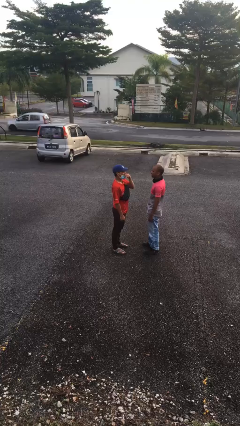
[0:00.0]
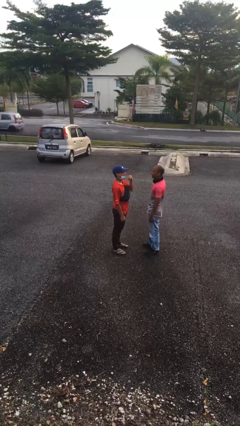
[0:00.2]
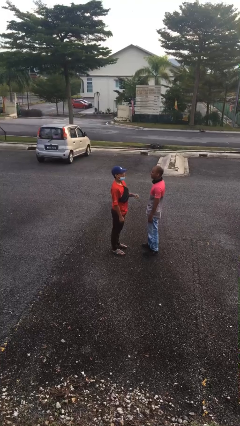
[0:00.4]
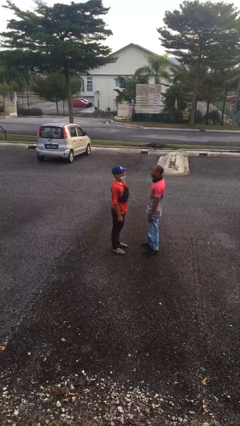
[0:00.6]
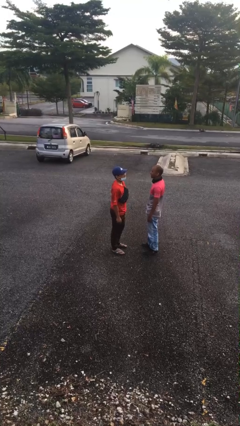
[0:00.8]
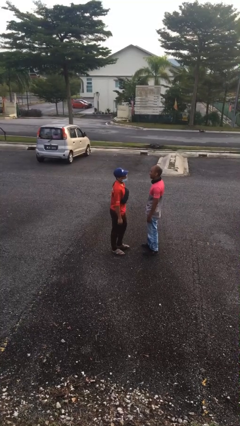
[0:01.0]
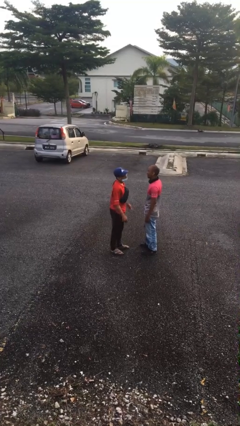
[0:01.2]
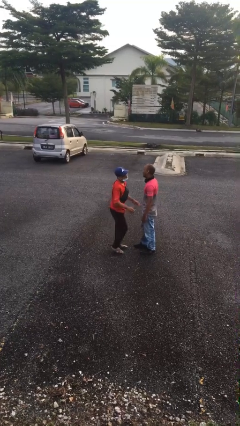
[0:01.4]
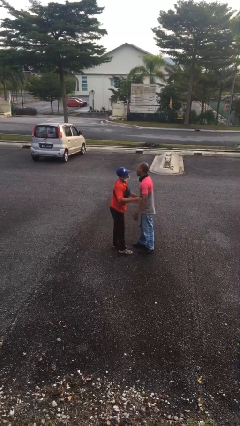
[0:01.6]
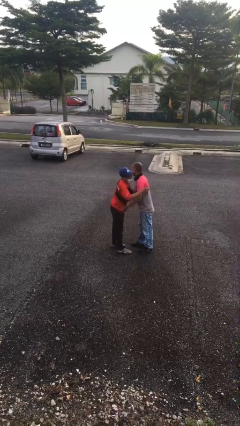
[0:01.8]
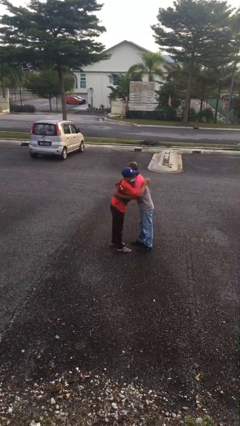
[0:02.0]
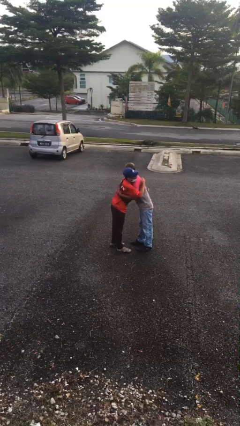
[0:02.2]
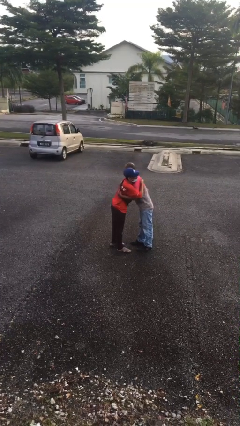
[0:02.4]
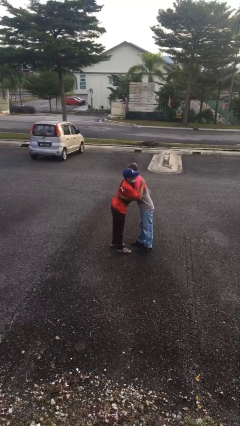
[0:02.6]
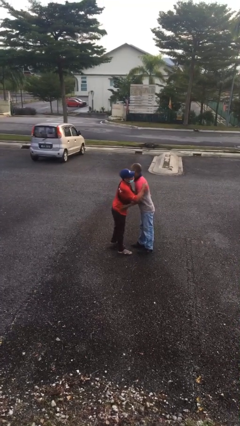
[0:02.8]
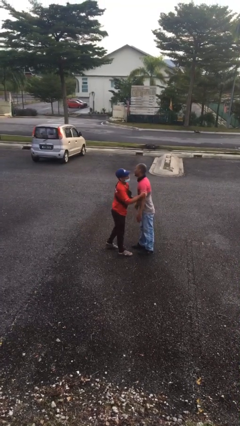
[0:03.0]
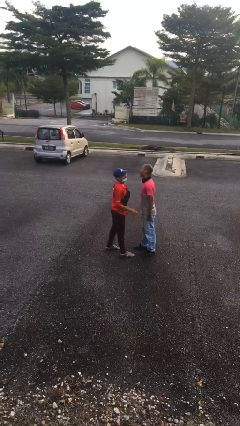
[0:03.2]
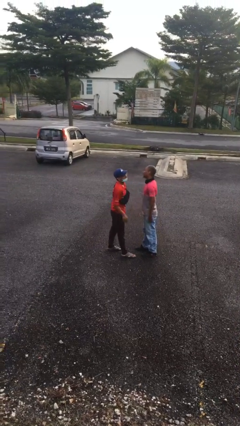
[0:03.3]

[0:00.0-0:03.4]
person embraces person

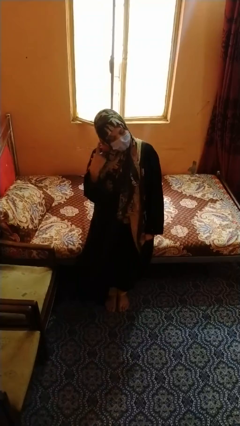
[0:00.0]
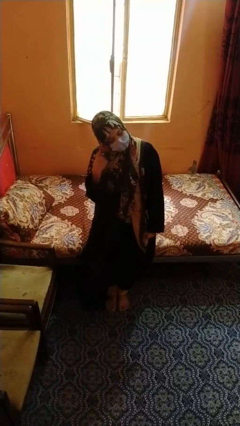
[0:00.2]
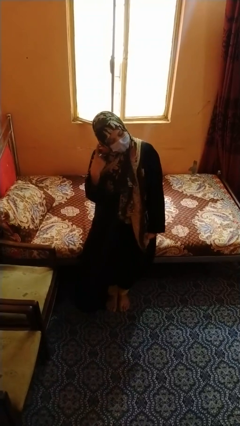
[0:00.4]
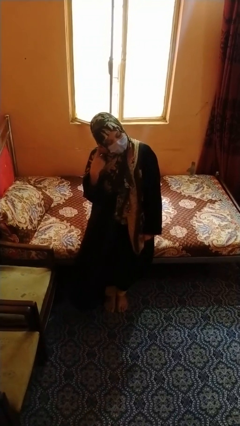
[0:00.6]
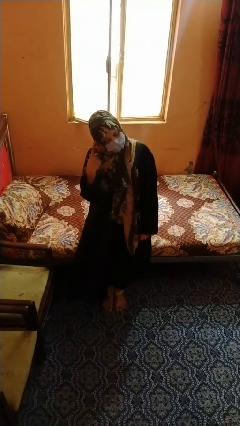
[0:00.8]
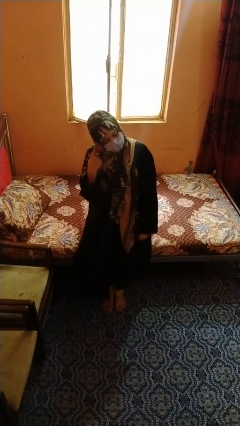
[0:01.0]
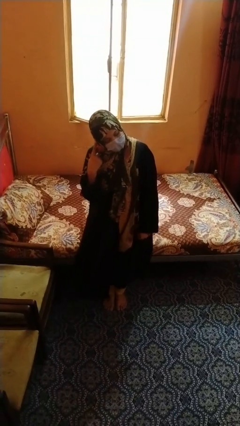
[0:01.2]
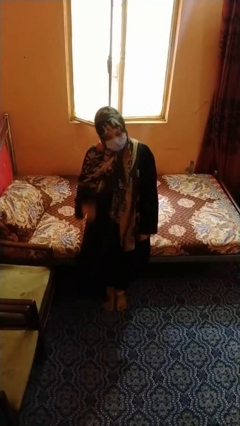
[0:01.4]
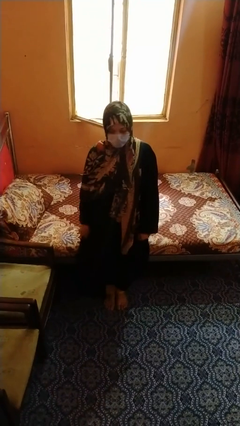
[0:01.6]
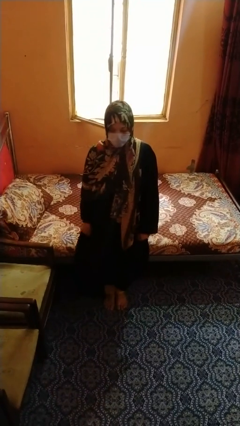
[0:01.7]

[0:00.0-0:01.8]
person gestures listen closely

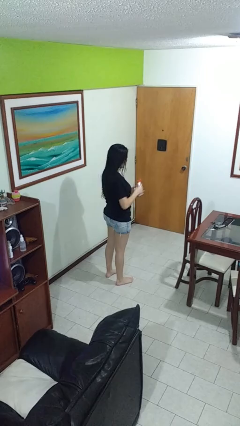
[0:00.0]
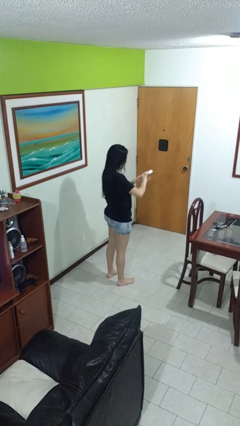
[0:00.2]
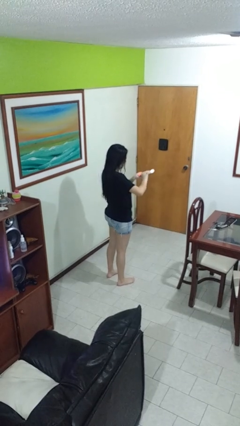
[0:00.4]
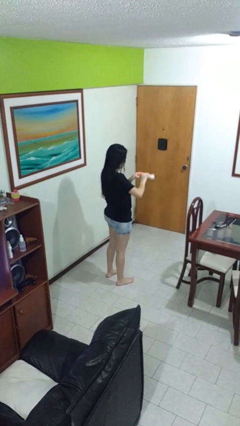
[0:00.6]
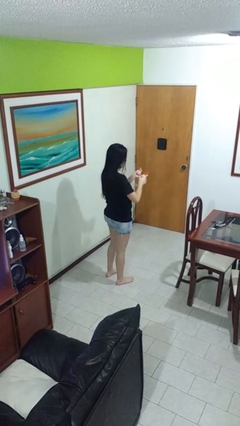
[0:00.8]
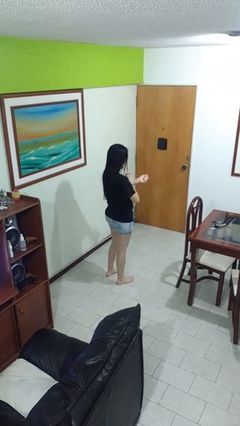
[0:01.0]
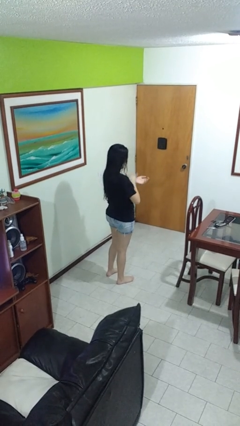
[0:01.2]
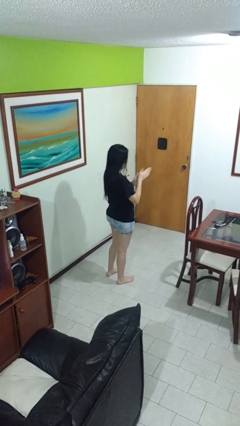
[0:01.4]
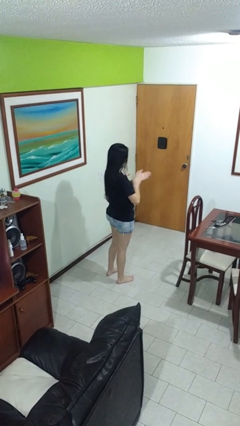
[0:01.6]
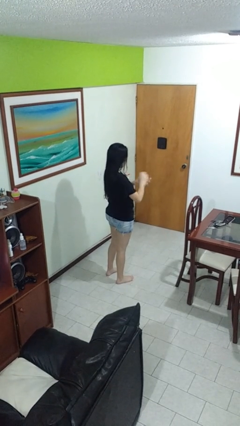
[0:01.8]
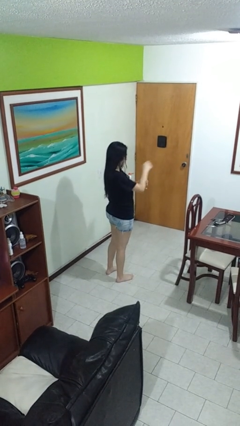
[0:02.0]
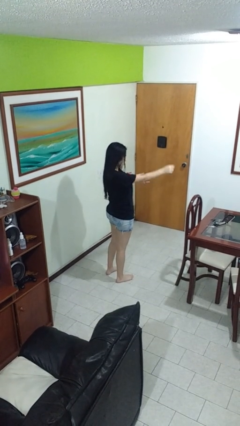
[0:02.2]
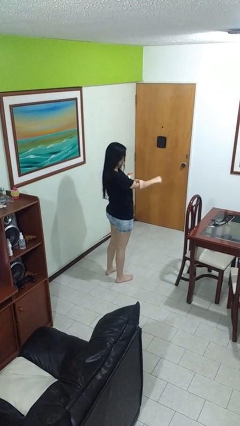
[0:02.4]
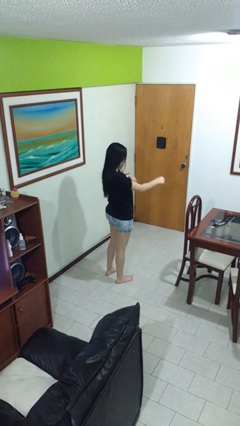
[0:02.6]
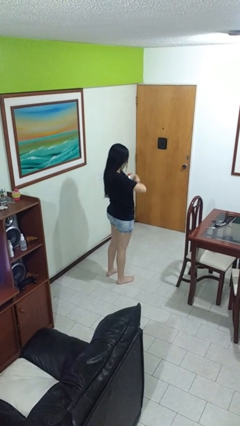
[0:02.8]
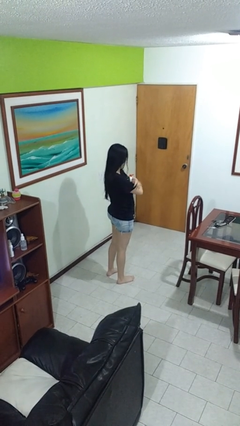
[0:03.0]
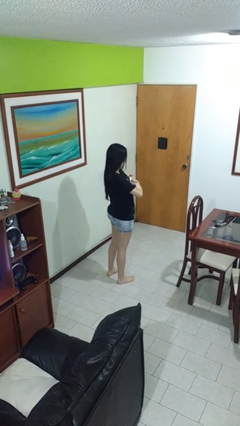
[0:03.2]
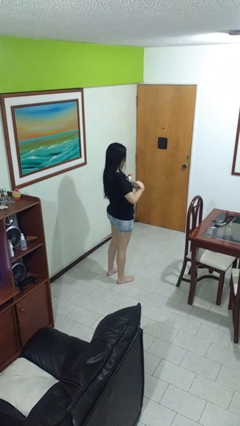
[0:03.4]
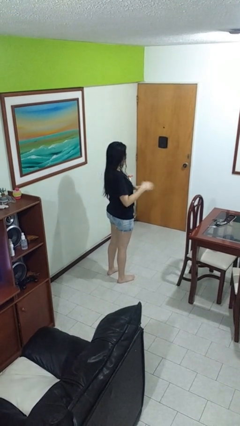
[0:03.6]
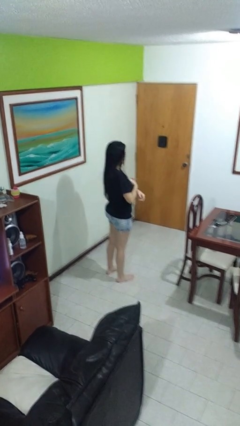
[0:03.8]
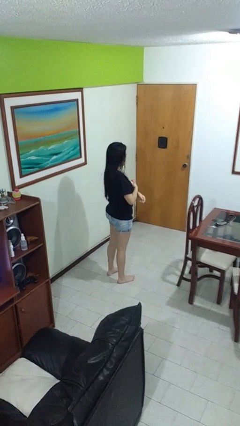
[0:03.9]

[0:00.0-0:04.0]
person applies sunscreen

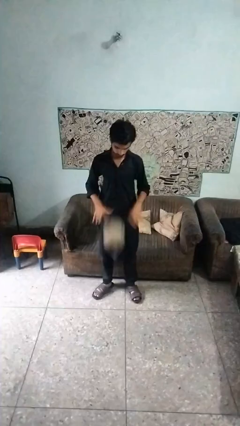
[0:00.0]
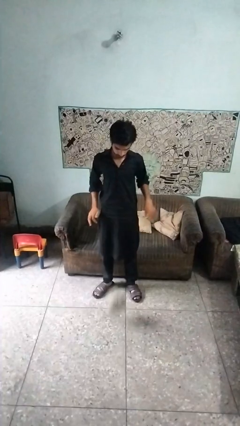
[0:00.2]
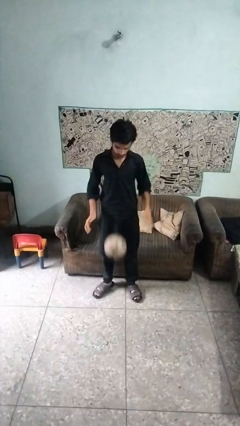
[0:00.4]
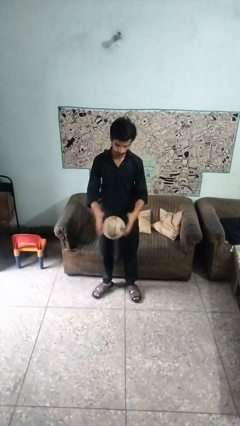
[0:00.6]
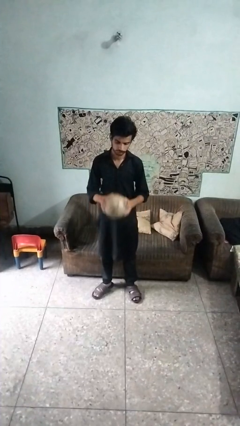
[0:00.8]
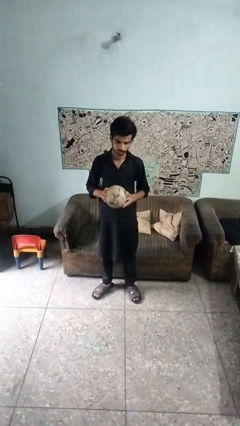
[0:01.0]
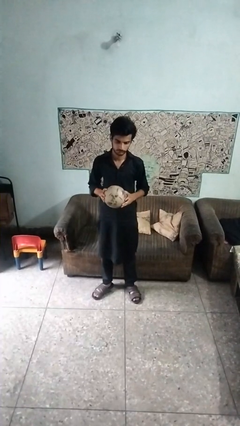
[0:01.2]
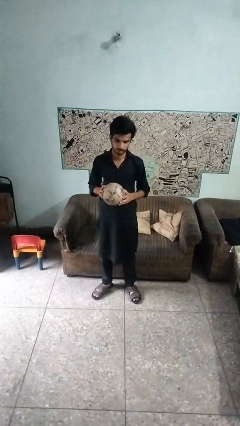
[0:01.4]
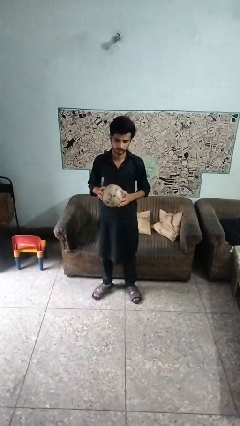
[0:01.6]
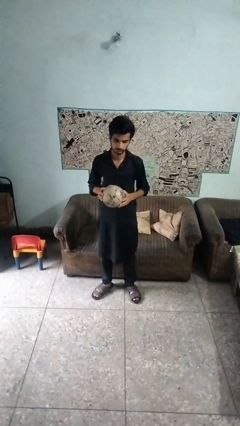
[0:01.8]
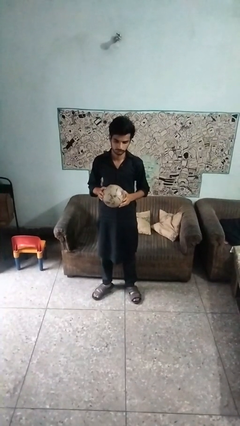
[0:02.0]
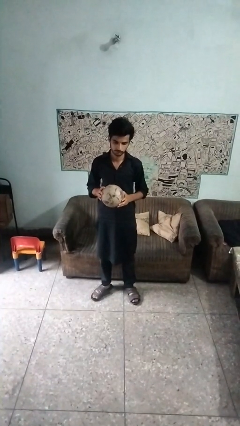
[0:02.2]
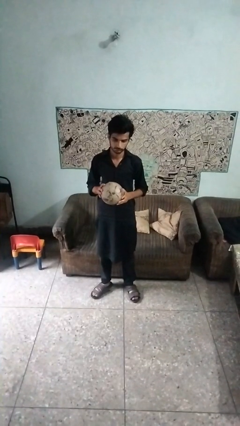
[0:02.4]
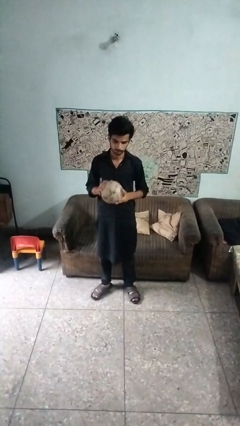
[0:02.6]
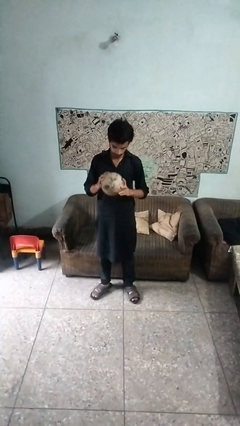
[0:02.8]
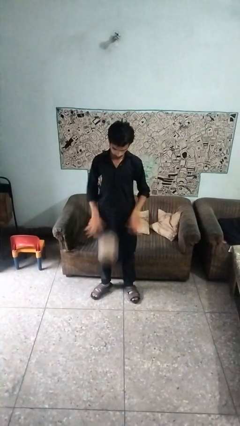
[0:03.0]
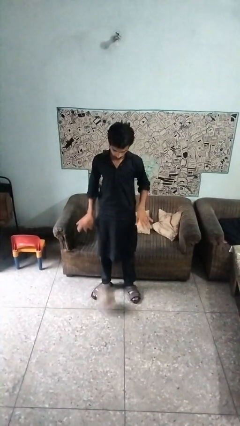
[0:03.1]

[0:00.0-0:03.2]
person puts on hoodie

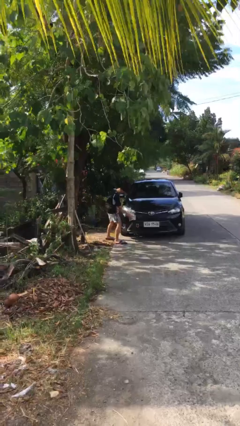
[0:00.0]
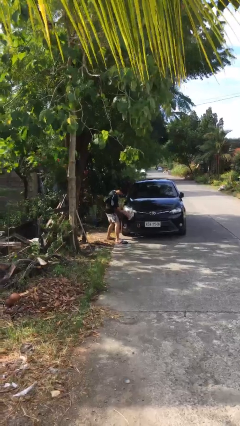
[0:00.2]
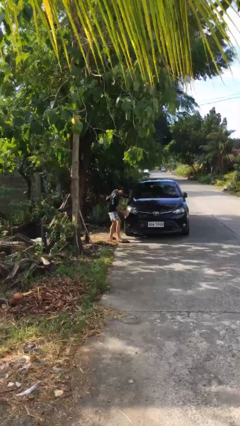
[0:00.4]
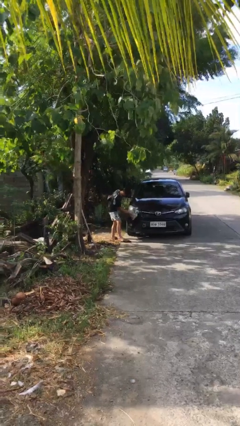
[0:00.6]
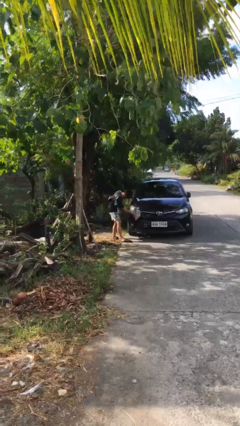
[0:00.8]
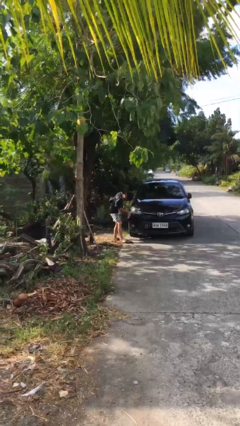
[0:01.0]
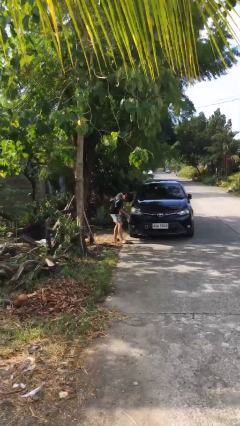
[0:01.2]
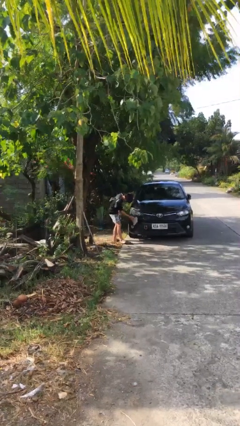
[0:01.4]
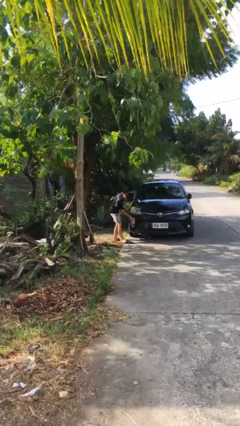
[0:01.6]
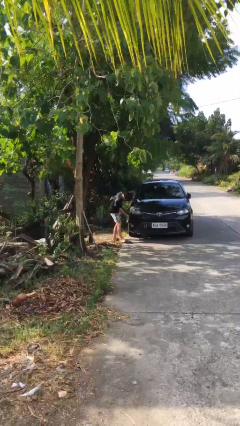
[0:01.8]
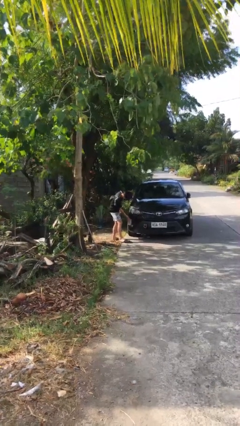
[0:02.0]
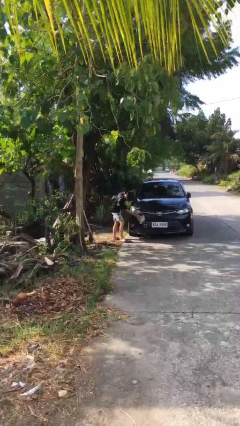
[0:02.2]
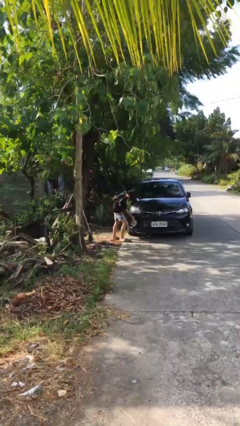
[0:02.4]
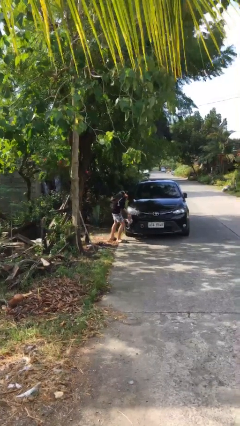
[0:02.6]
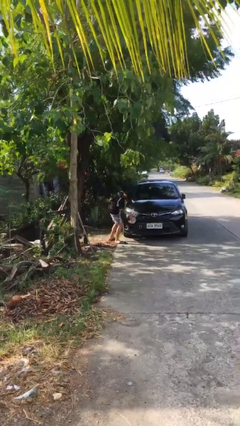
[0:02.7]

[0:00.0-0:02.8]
person polishes car with rag

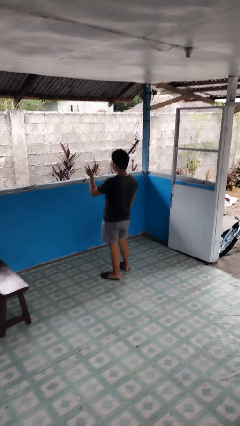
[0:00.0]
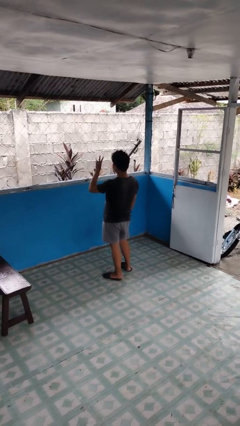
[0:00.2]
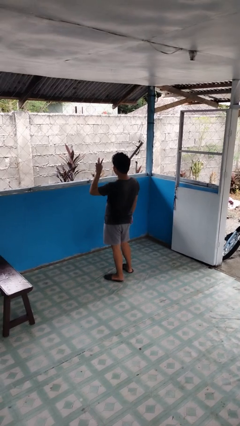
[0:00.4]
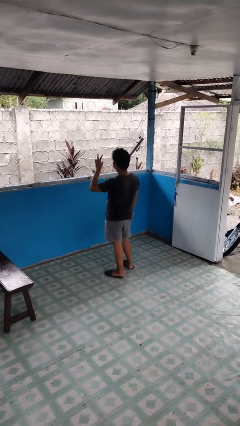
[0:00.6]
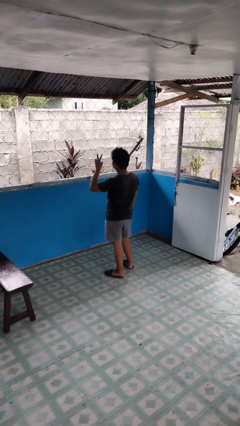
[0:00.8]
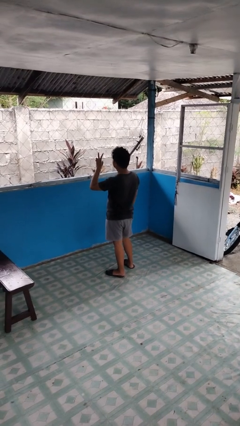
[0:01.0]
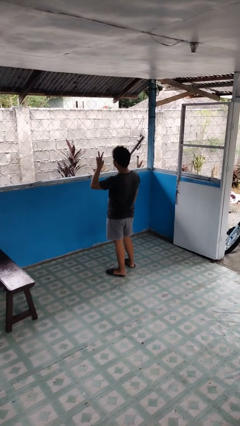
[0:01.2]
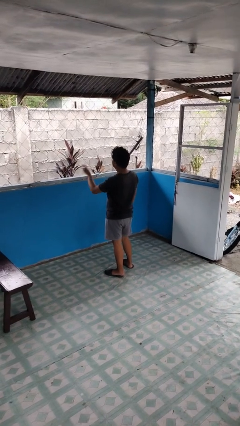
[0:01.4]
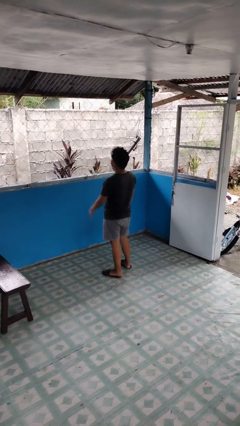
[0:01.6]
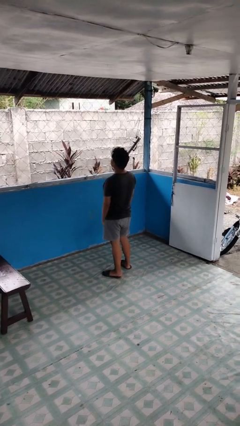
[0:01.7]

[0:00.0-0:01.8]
person gestures peace

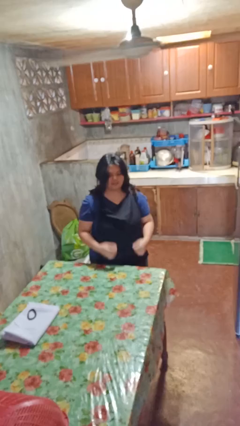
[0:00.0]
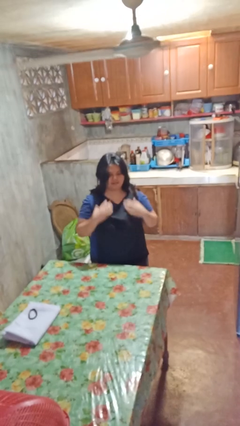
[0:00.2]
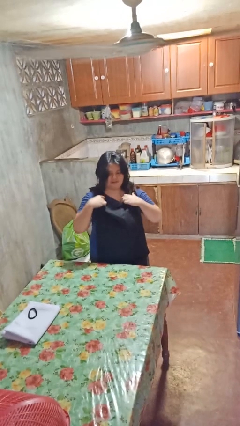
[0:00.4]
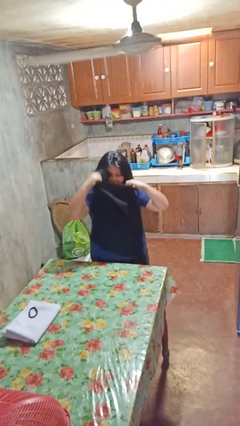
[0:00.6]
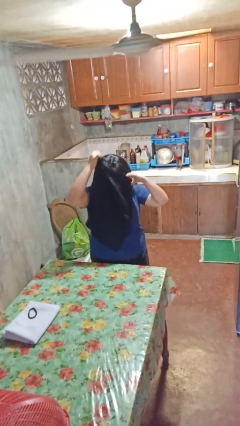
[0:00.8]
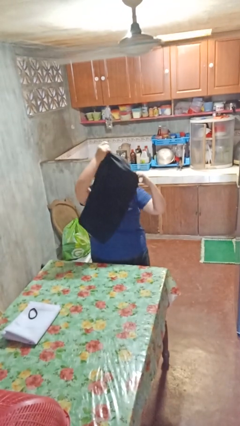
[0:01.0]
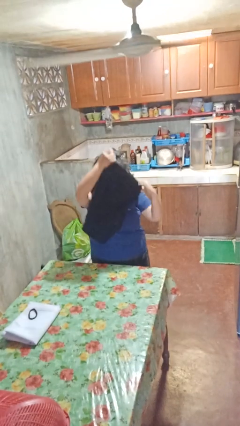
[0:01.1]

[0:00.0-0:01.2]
person takes off apron
